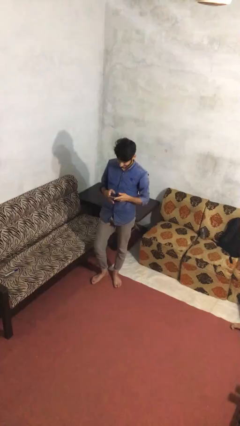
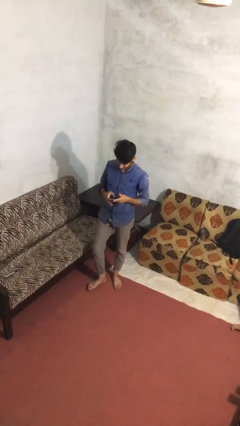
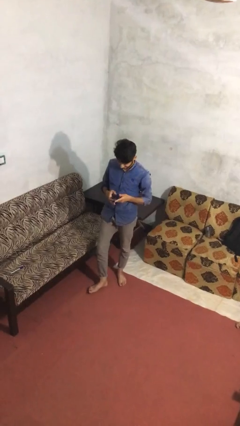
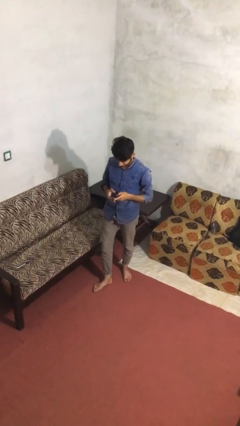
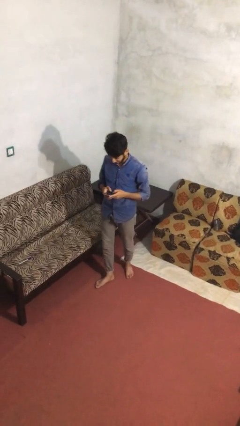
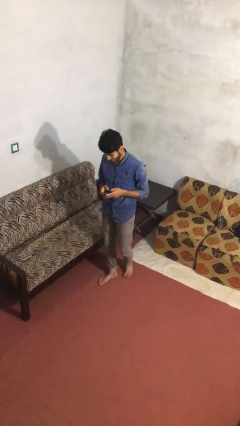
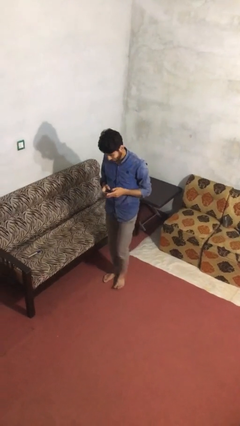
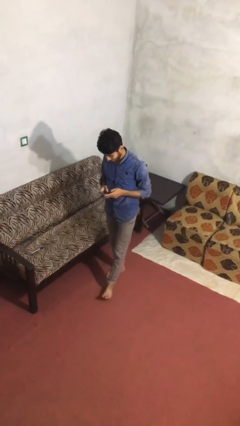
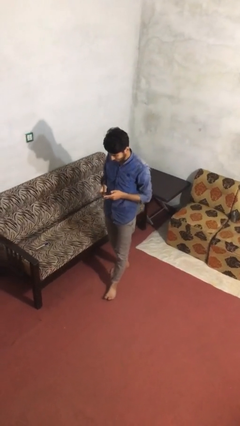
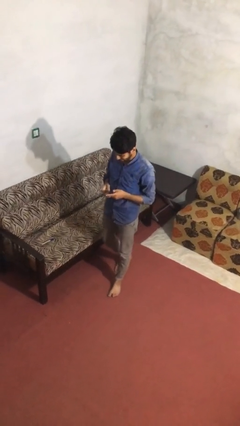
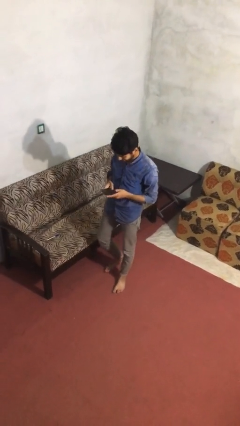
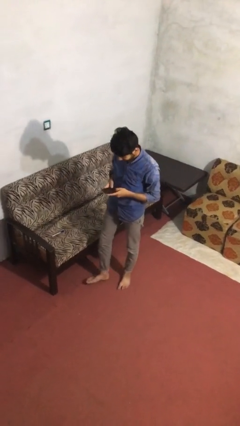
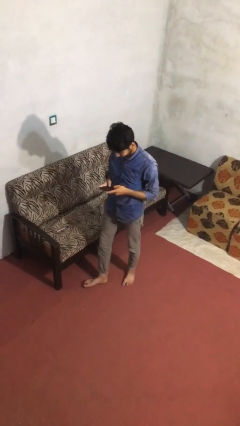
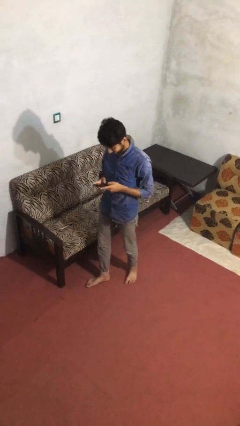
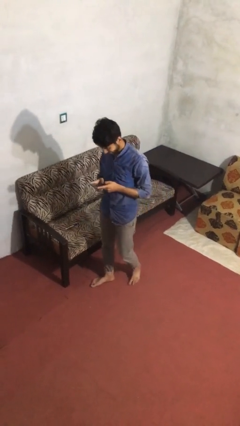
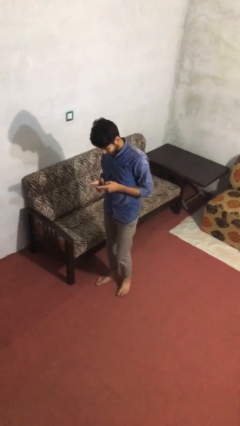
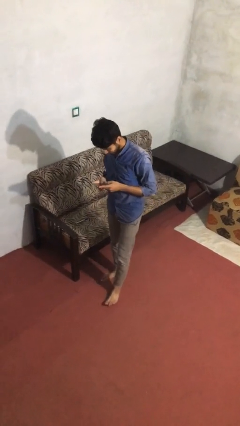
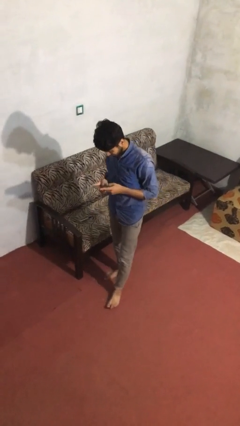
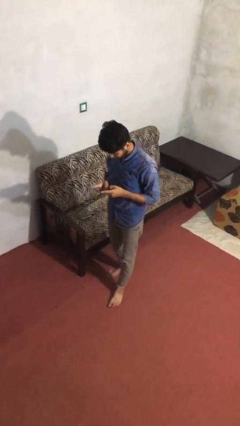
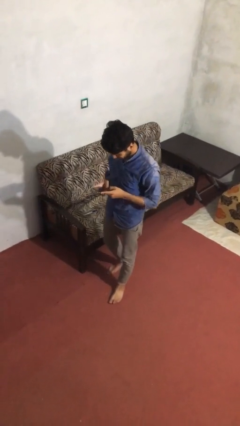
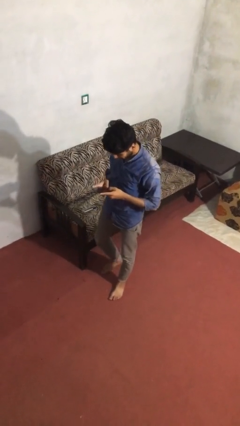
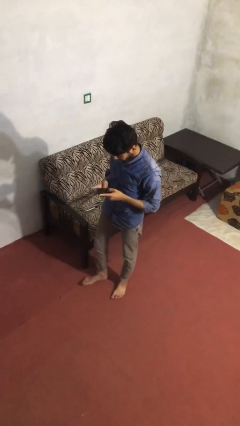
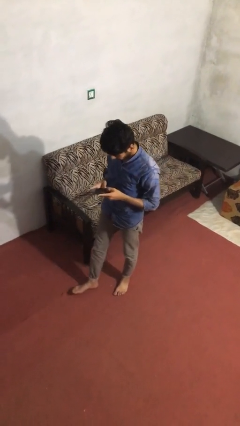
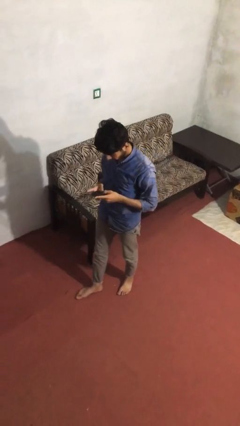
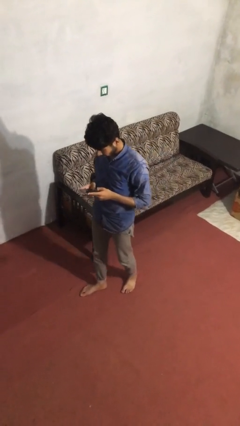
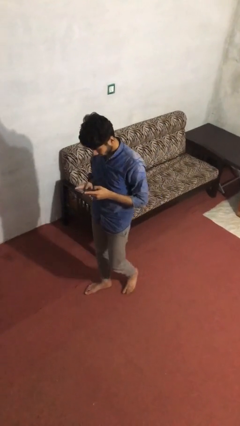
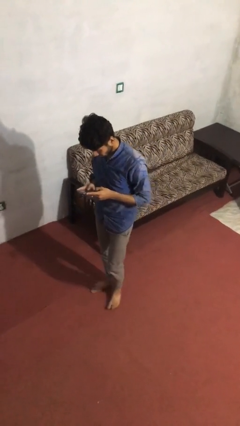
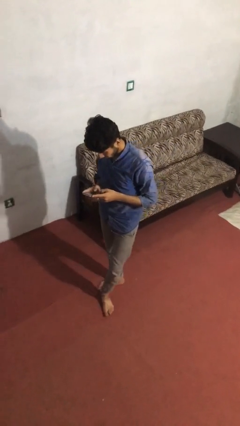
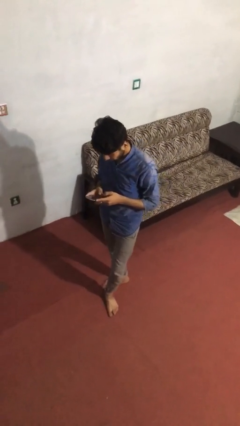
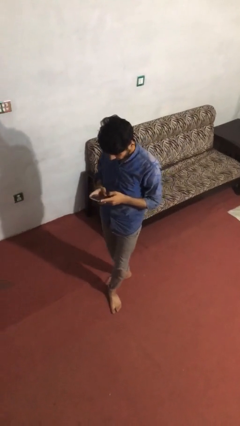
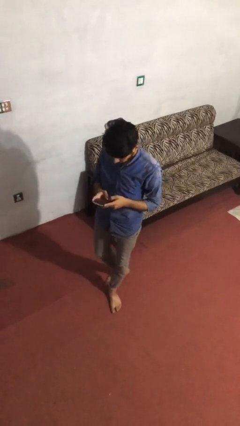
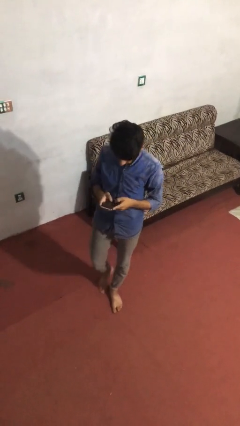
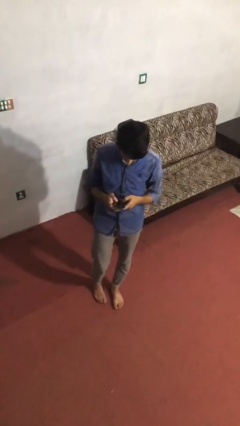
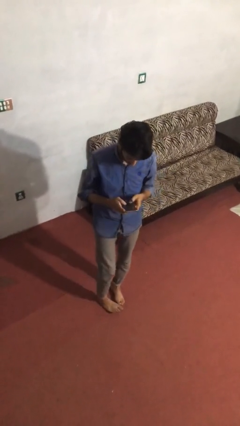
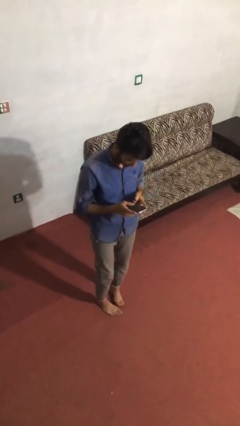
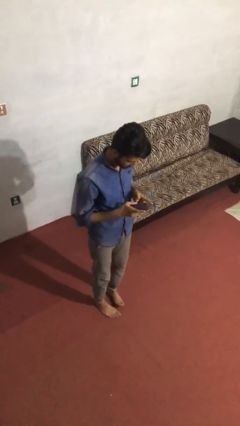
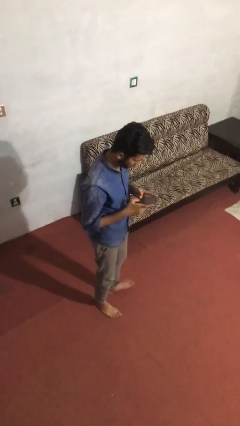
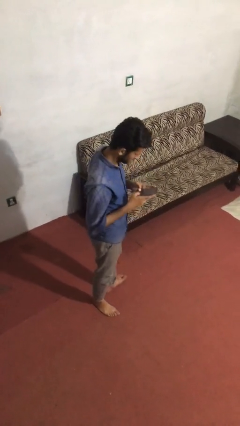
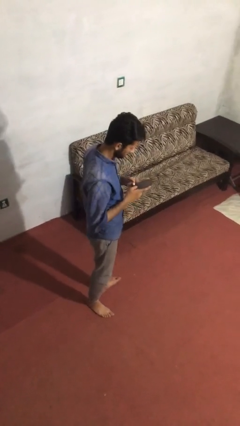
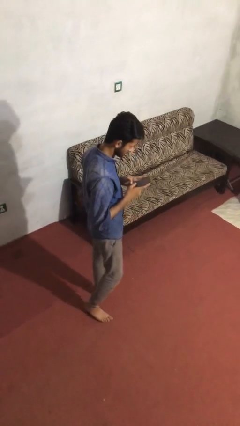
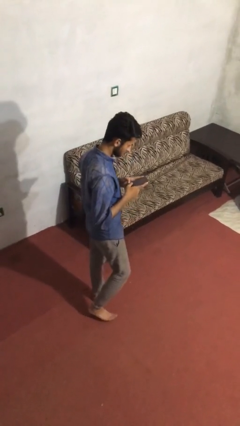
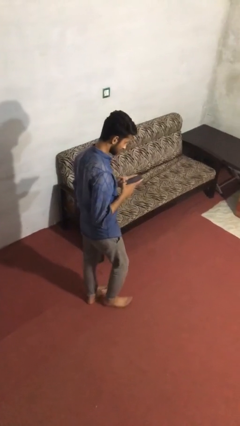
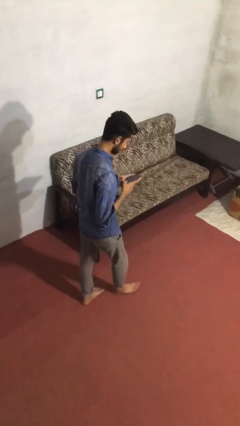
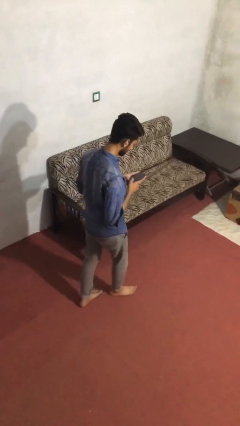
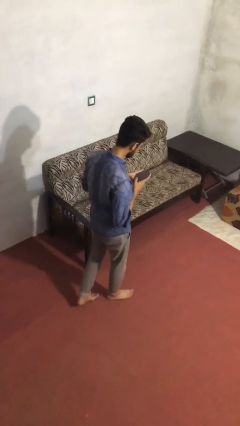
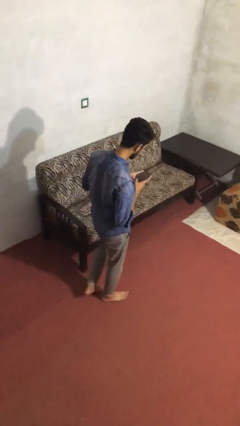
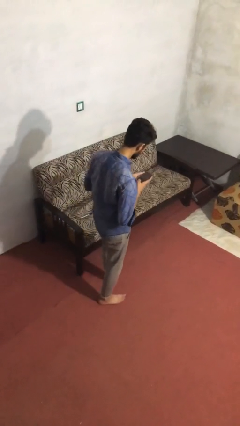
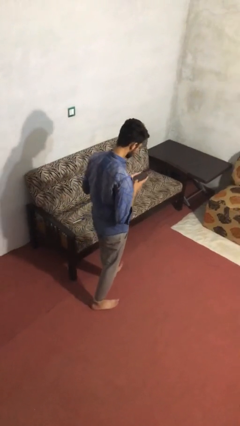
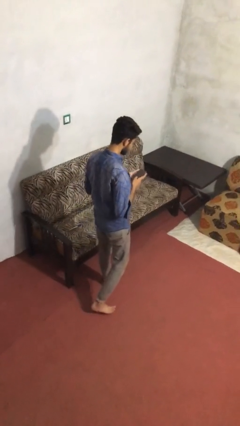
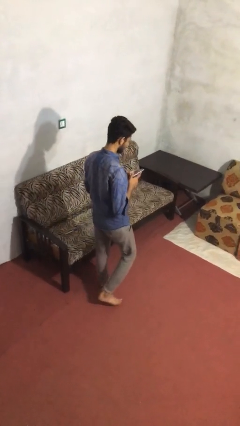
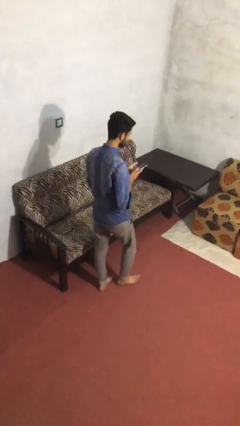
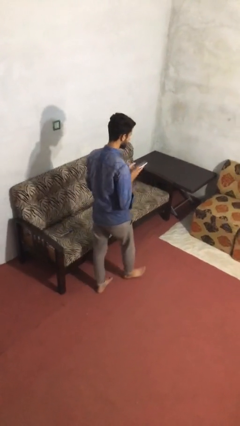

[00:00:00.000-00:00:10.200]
person texts on phone

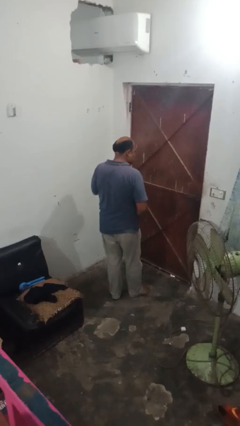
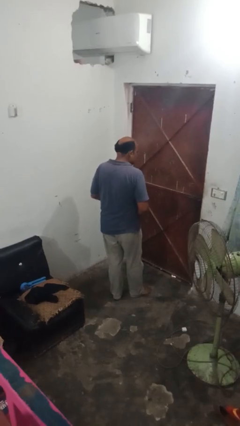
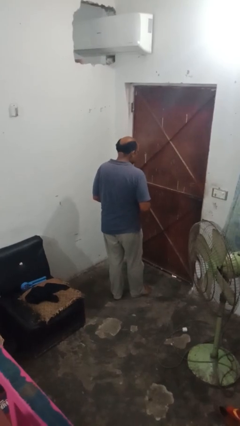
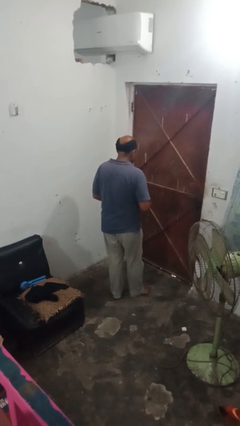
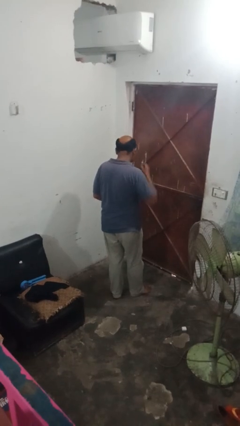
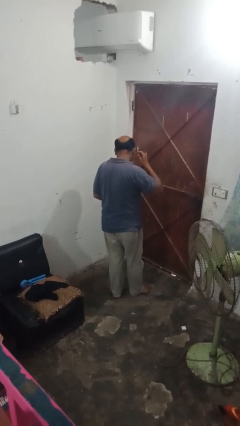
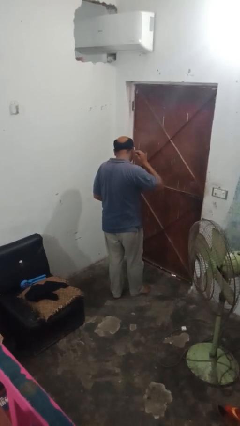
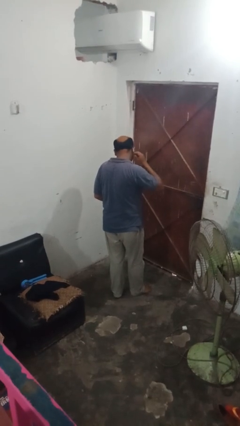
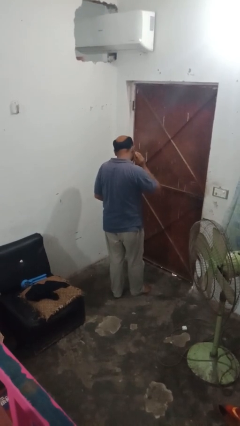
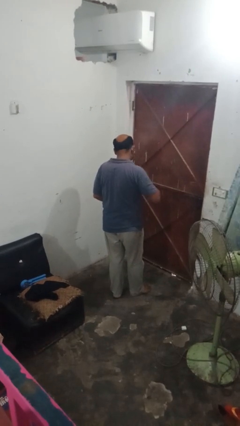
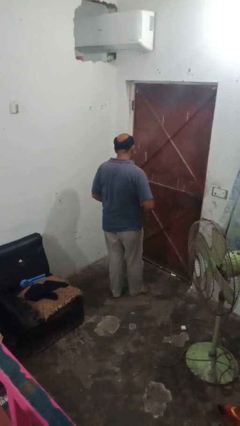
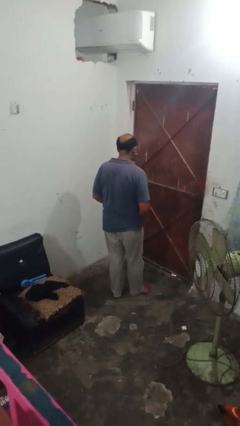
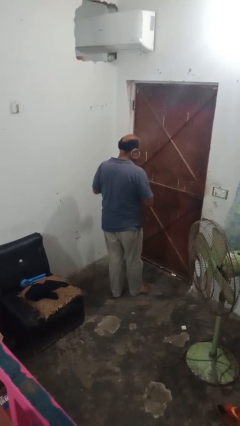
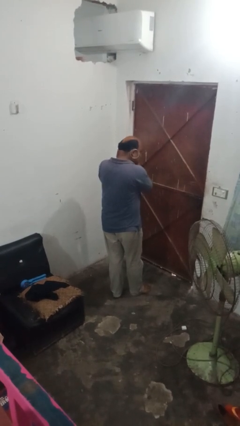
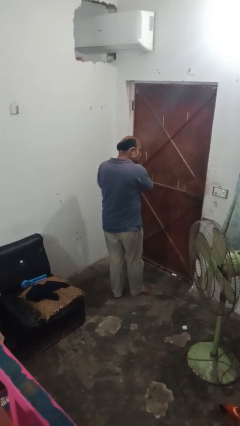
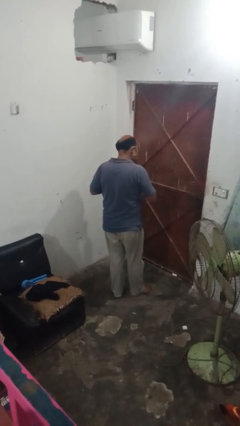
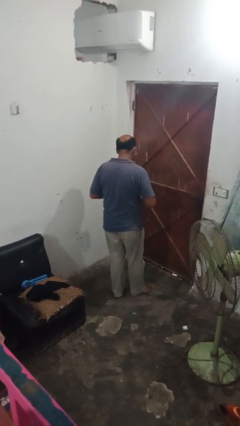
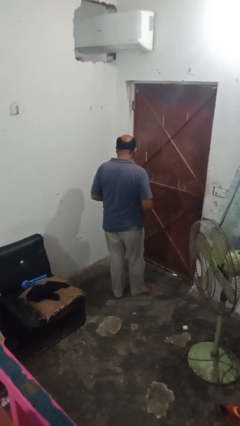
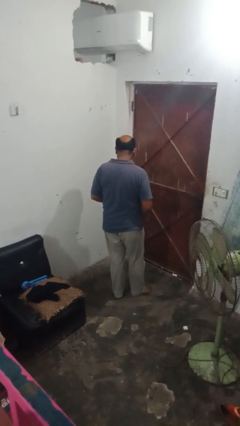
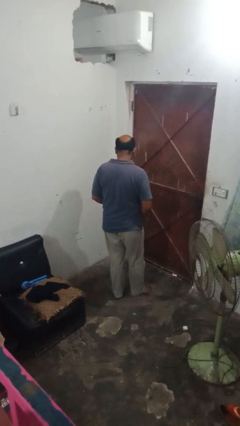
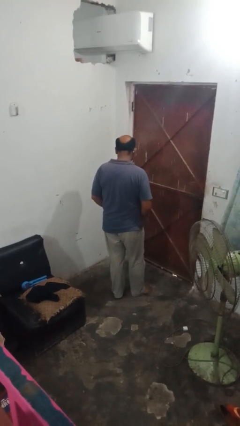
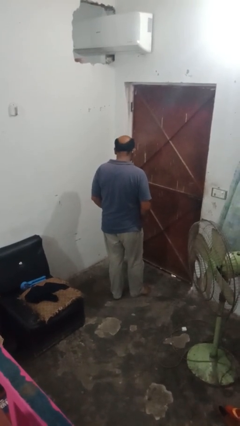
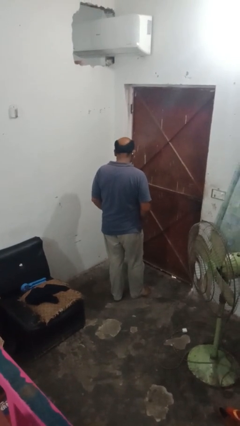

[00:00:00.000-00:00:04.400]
person puts on earrings

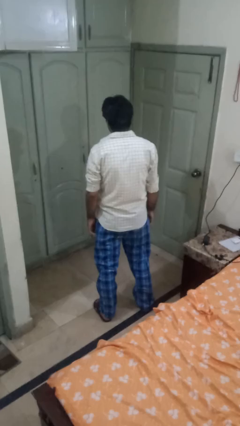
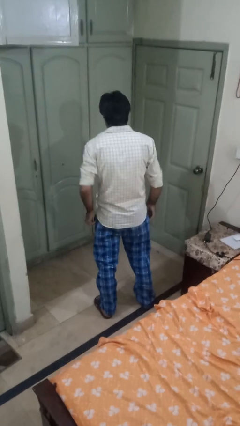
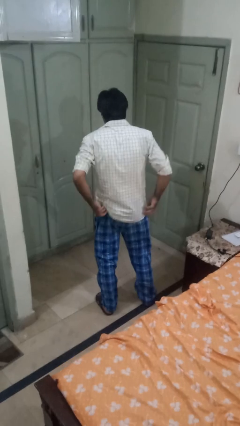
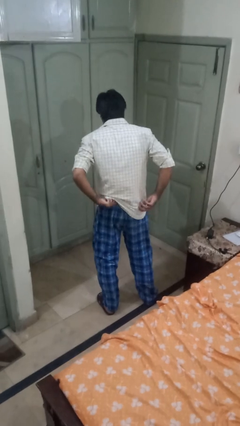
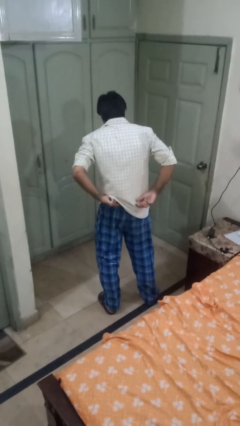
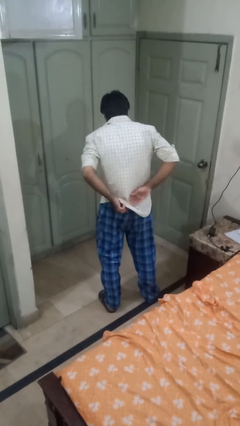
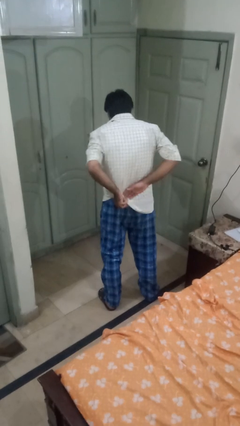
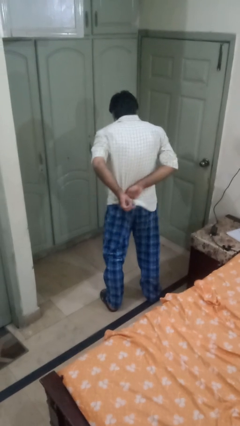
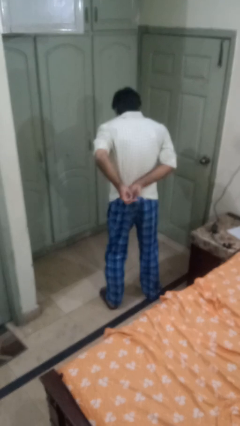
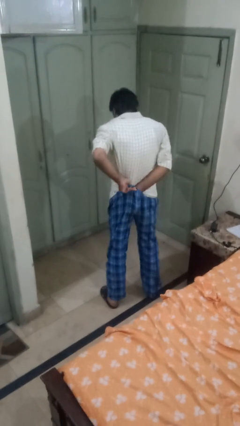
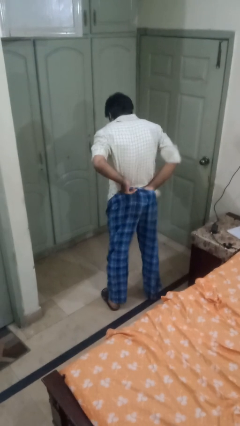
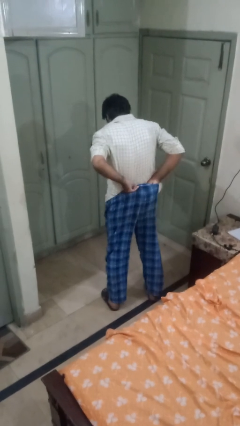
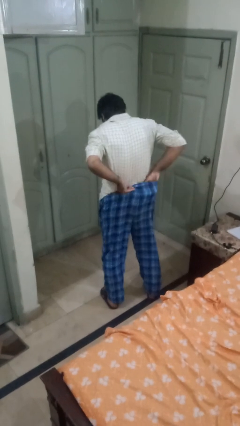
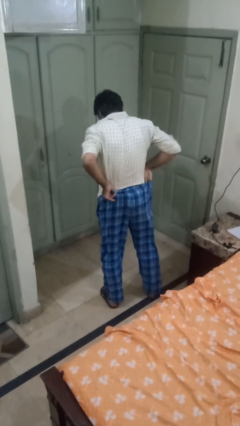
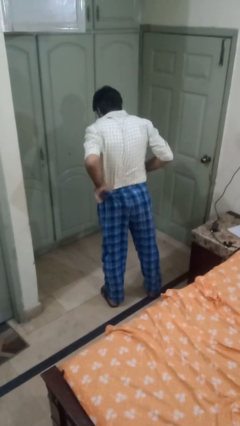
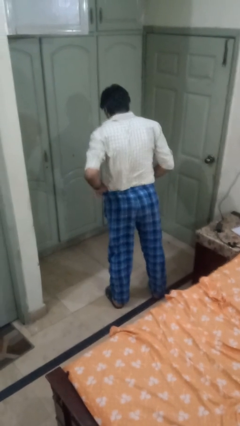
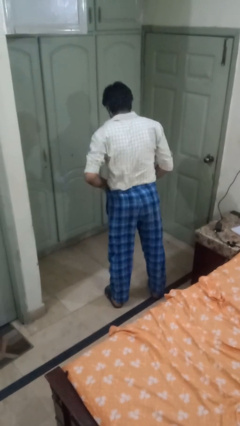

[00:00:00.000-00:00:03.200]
person tucks in shirt

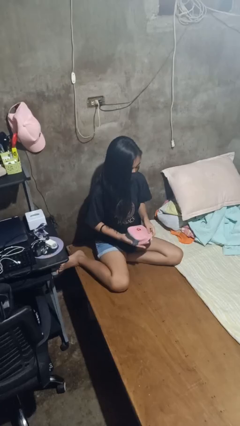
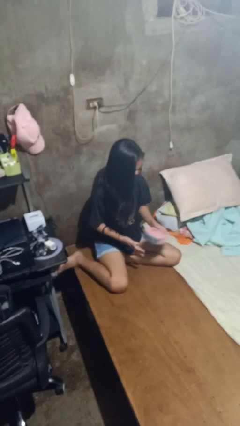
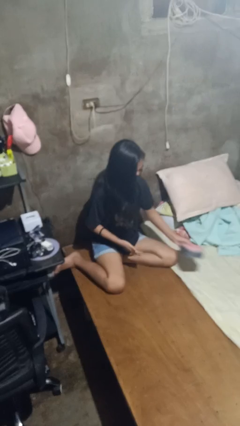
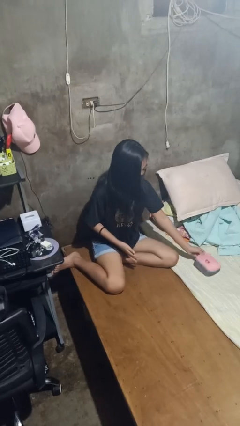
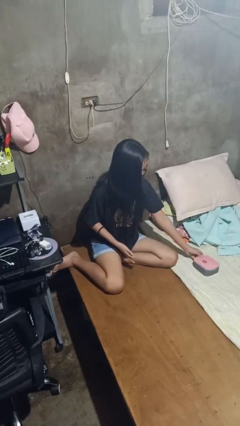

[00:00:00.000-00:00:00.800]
person puts down object on bed
